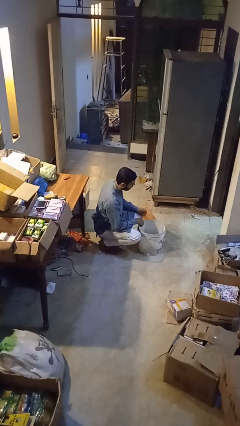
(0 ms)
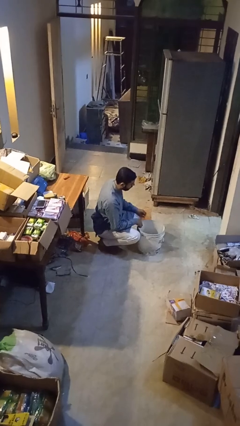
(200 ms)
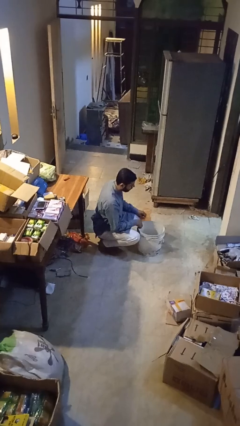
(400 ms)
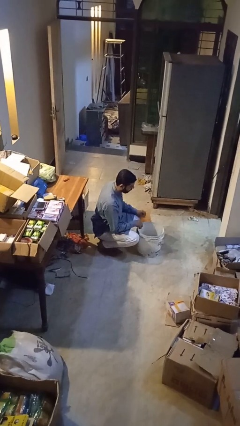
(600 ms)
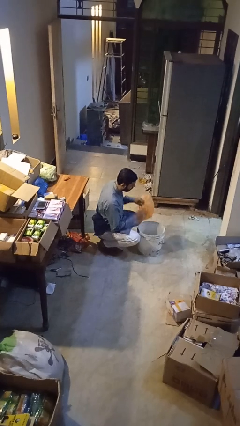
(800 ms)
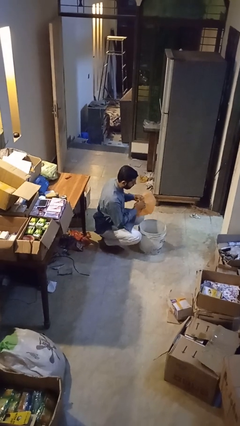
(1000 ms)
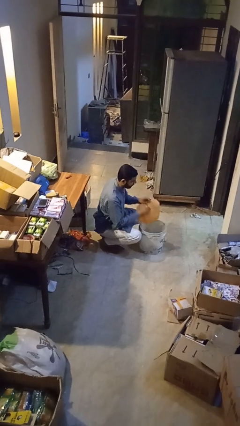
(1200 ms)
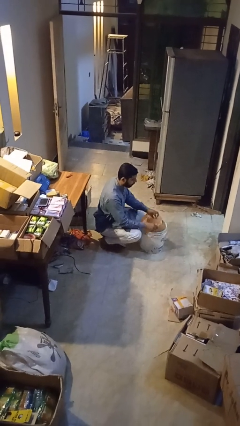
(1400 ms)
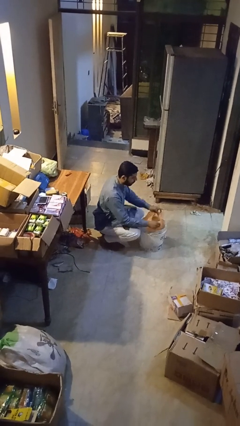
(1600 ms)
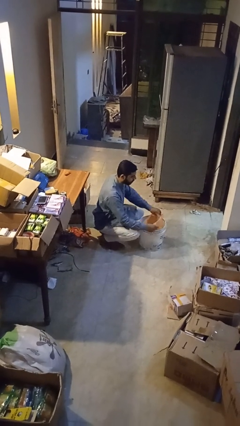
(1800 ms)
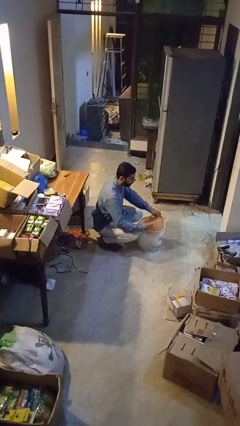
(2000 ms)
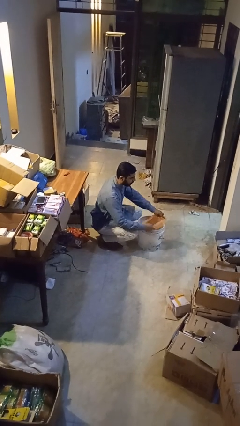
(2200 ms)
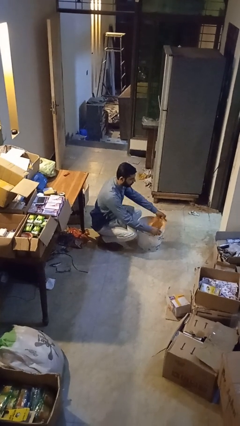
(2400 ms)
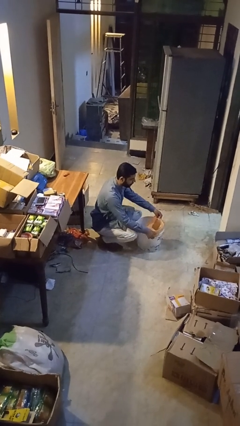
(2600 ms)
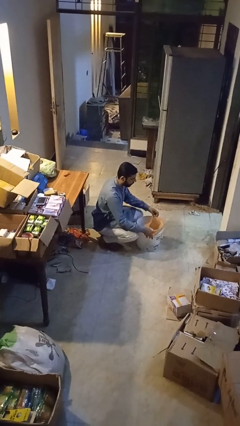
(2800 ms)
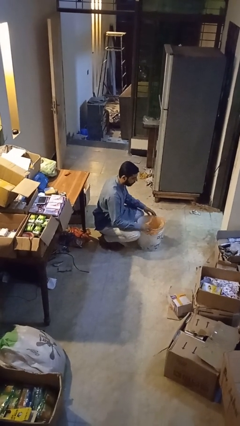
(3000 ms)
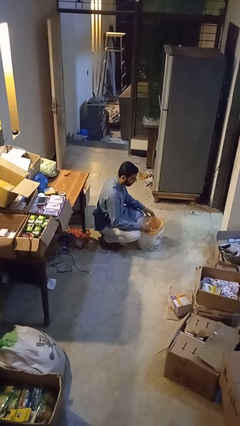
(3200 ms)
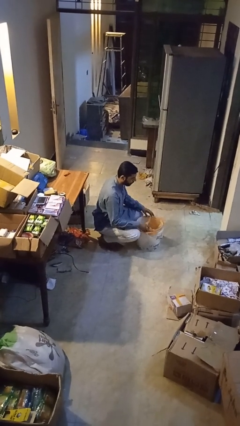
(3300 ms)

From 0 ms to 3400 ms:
person inserts trashbag into trashcan

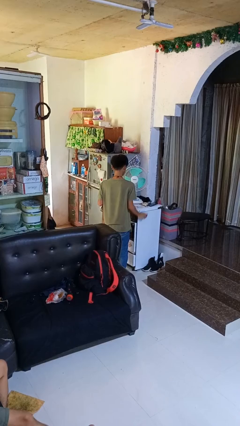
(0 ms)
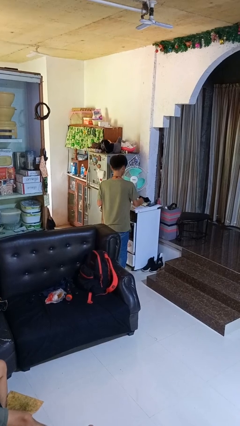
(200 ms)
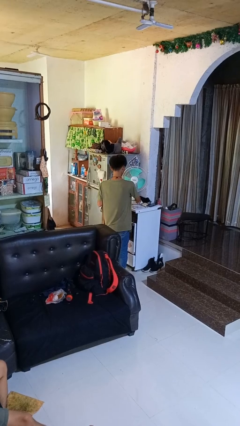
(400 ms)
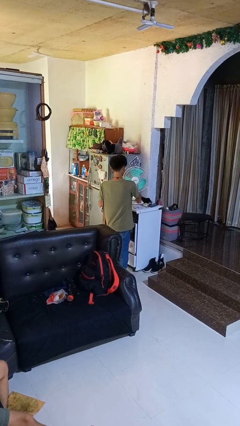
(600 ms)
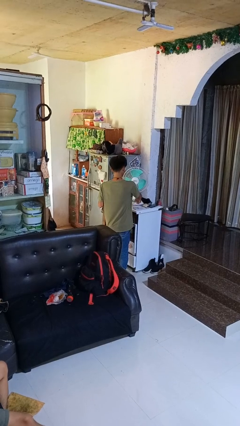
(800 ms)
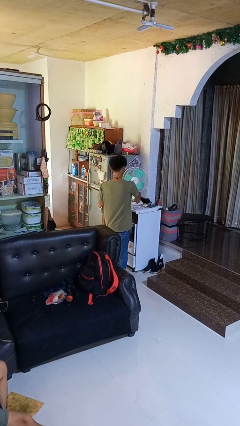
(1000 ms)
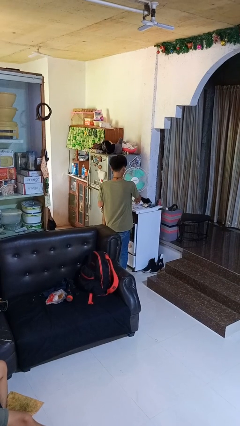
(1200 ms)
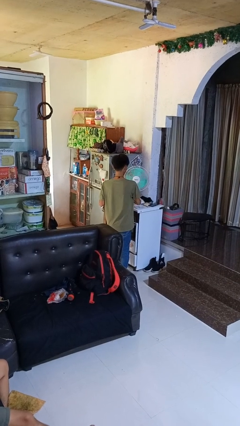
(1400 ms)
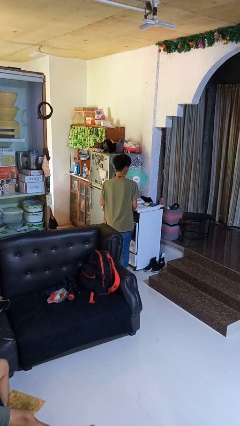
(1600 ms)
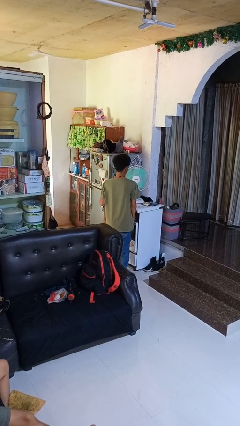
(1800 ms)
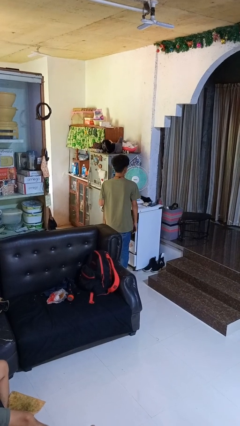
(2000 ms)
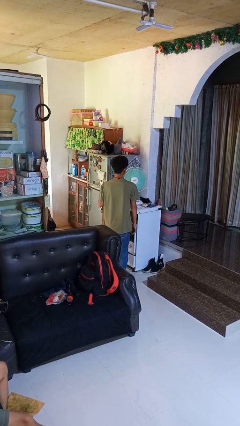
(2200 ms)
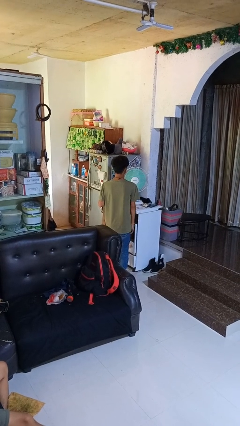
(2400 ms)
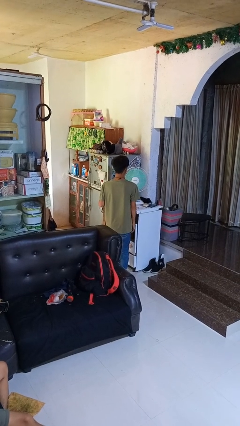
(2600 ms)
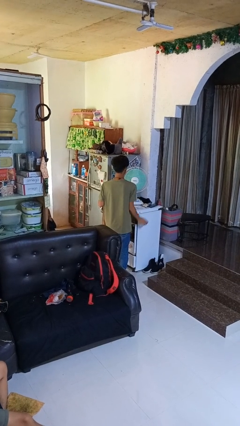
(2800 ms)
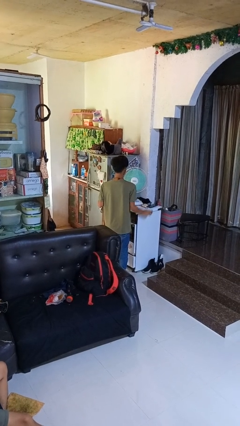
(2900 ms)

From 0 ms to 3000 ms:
person turns on fan

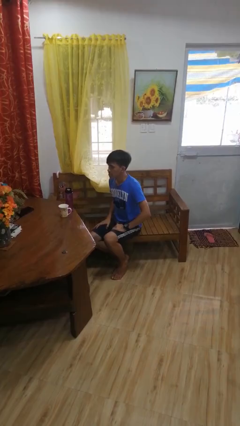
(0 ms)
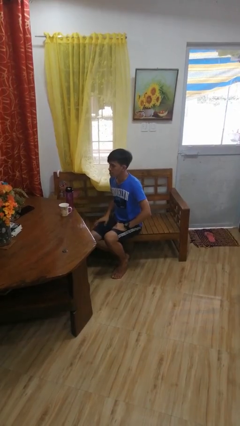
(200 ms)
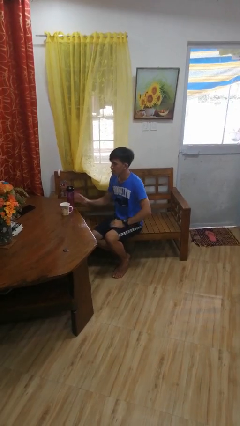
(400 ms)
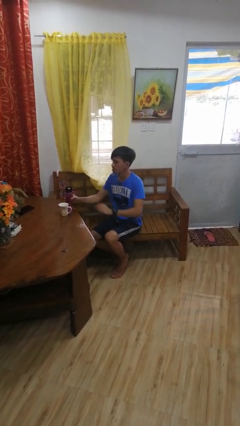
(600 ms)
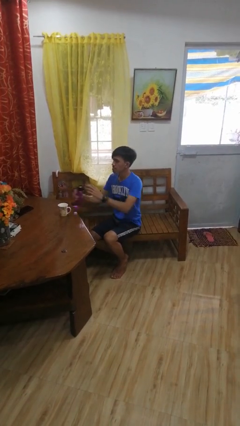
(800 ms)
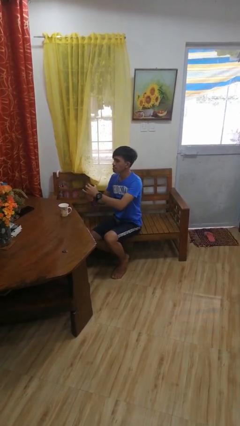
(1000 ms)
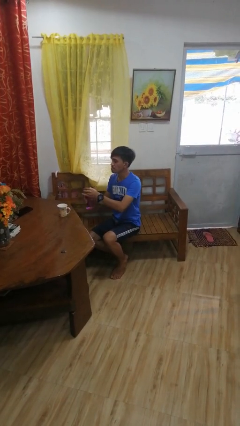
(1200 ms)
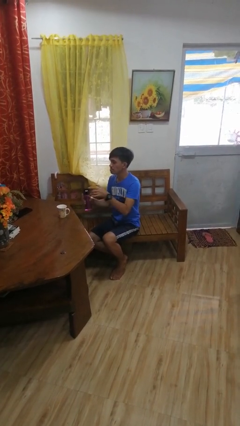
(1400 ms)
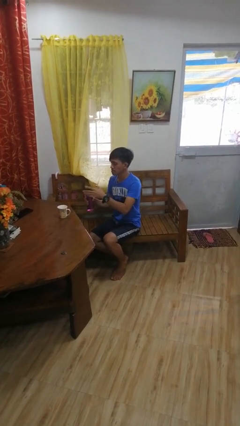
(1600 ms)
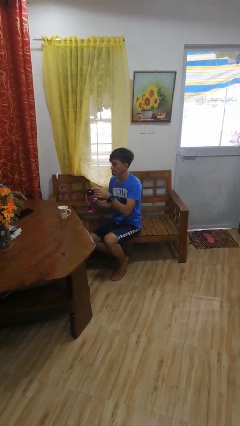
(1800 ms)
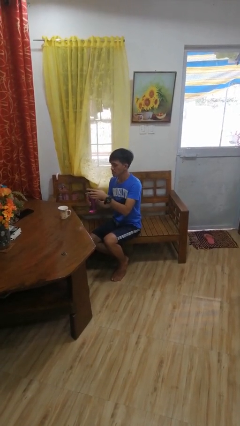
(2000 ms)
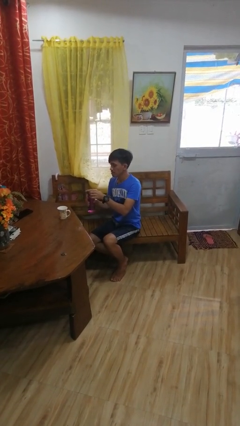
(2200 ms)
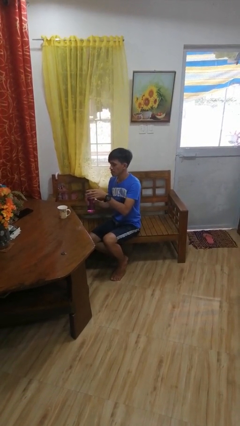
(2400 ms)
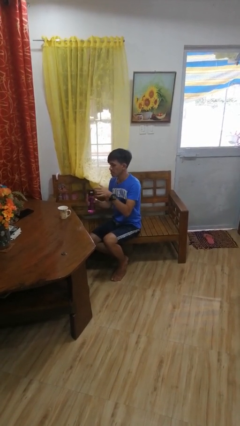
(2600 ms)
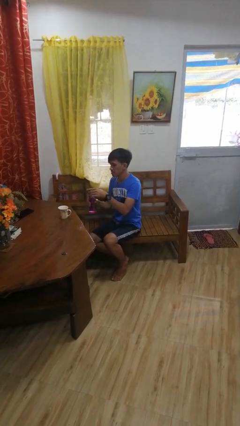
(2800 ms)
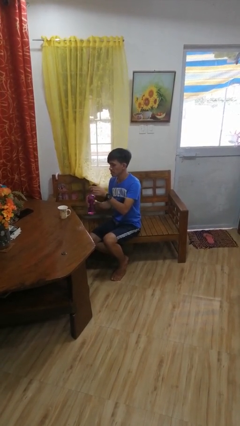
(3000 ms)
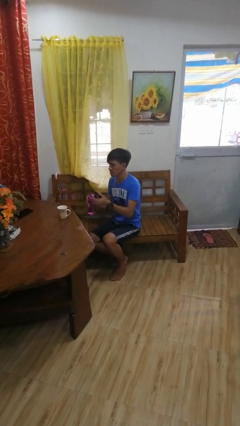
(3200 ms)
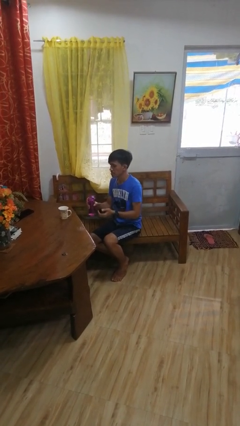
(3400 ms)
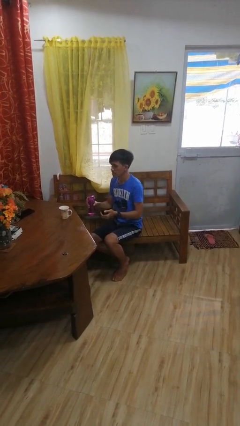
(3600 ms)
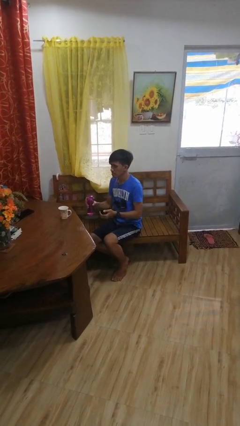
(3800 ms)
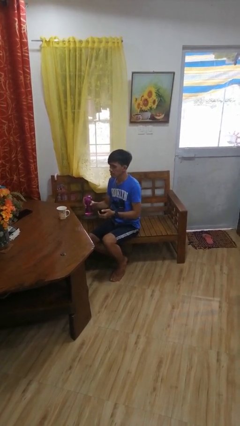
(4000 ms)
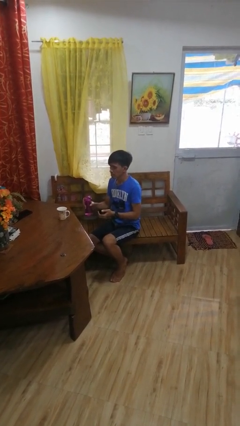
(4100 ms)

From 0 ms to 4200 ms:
person unscrews lid from bottle

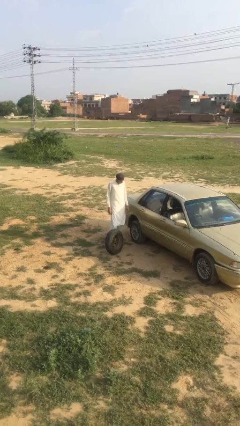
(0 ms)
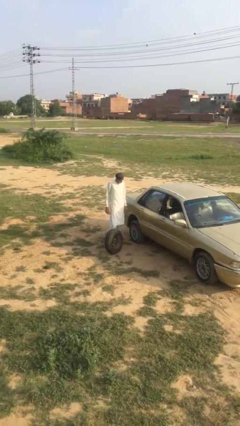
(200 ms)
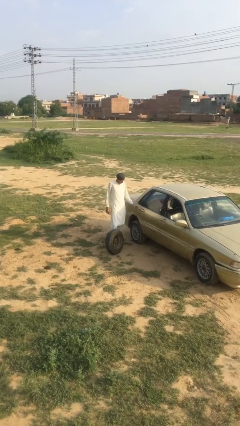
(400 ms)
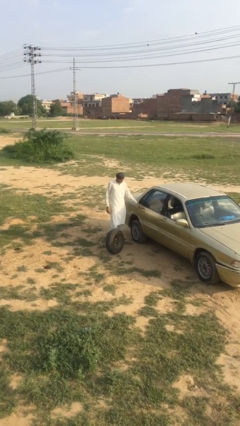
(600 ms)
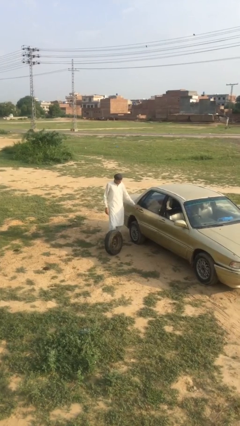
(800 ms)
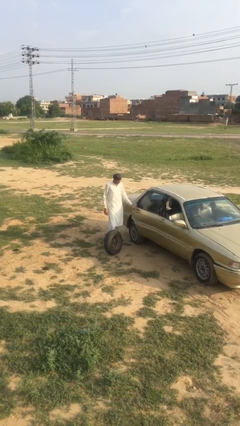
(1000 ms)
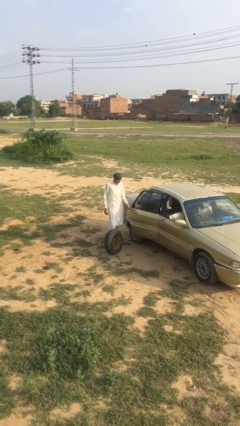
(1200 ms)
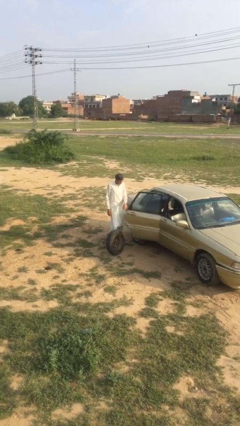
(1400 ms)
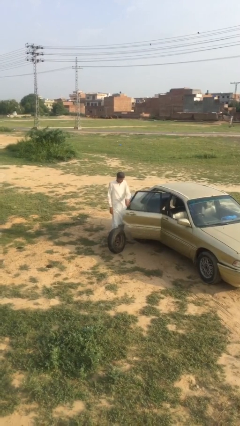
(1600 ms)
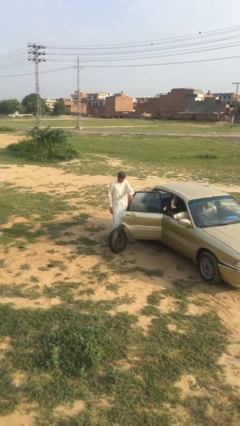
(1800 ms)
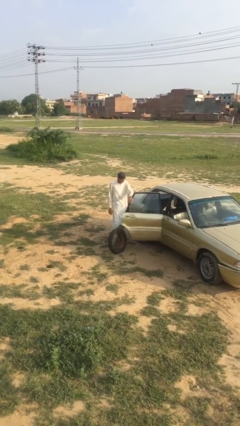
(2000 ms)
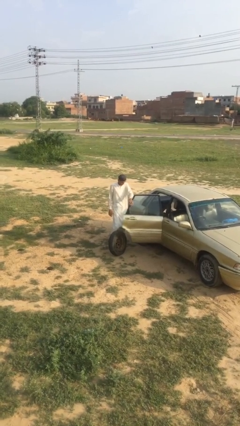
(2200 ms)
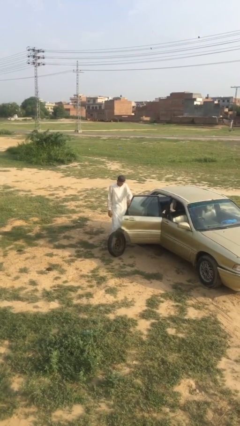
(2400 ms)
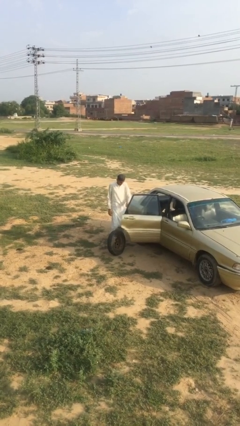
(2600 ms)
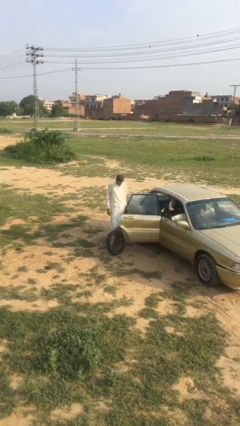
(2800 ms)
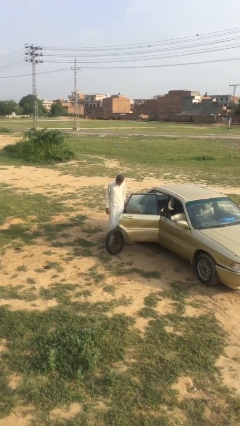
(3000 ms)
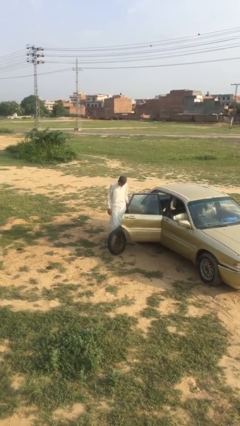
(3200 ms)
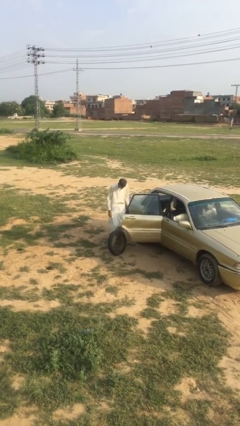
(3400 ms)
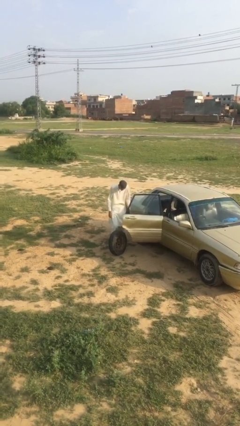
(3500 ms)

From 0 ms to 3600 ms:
person opens car door

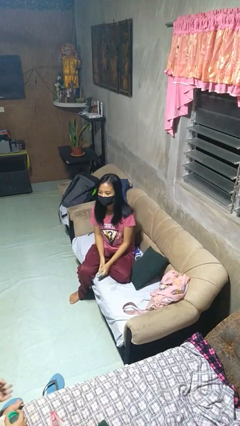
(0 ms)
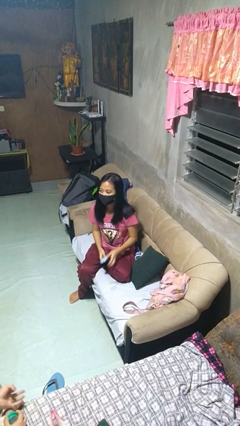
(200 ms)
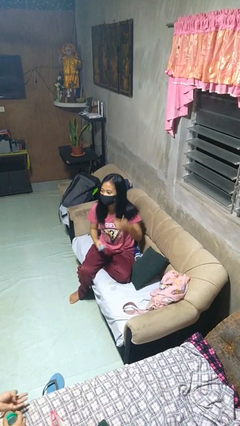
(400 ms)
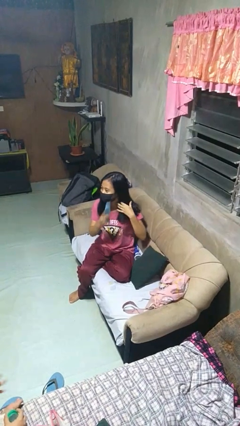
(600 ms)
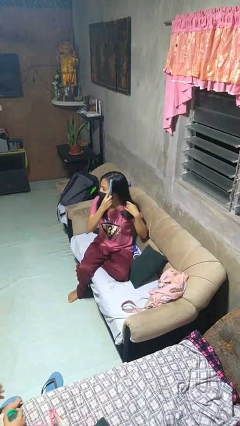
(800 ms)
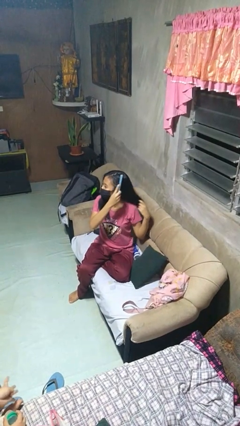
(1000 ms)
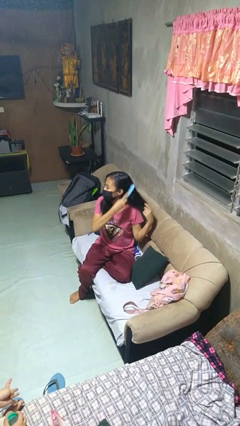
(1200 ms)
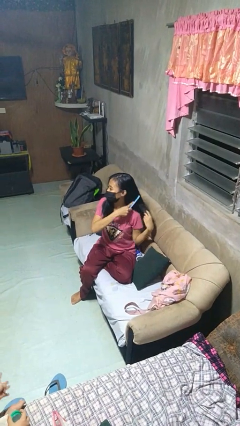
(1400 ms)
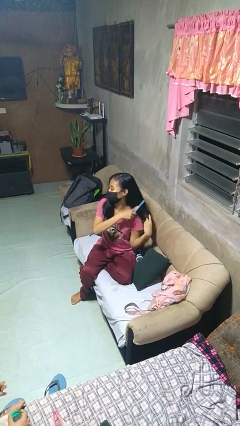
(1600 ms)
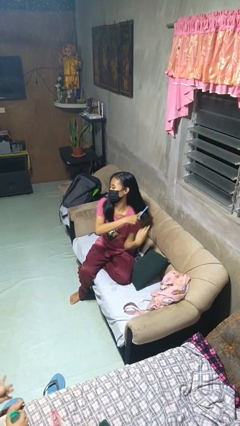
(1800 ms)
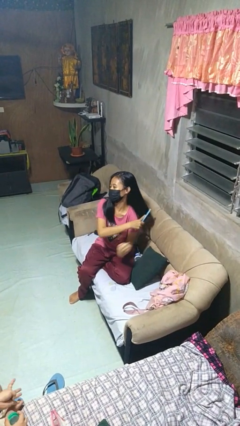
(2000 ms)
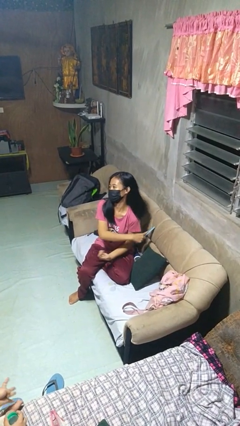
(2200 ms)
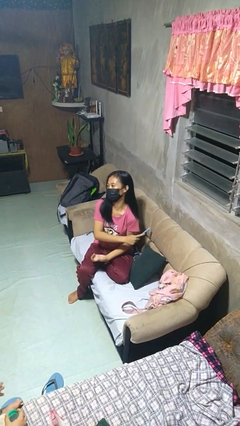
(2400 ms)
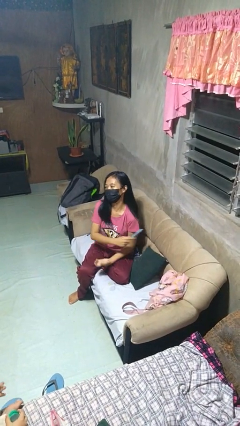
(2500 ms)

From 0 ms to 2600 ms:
person brushes hair

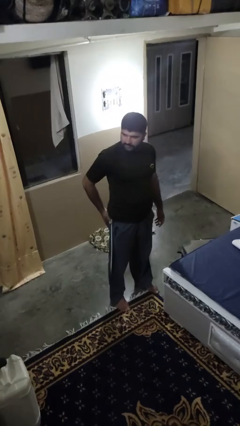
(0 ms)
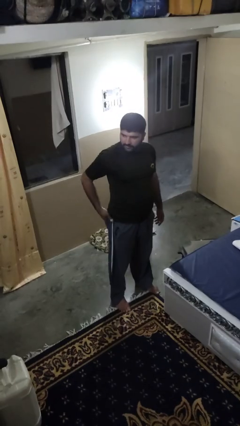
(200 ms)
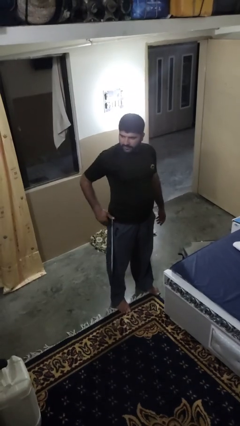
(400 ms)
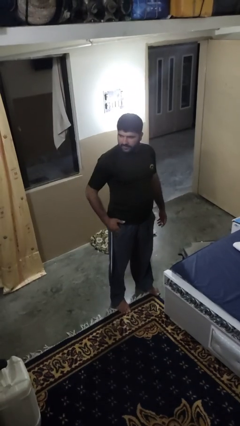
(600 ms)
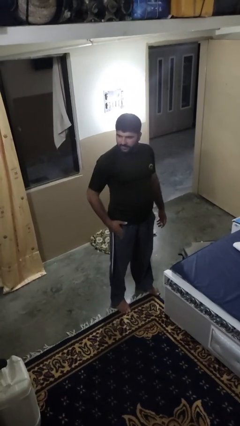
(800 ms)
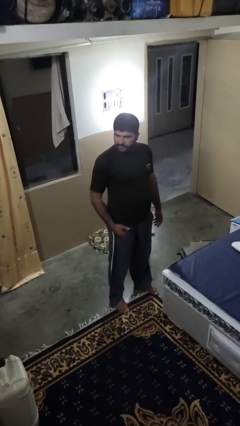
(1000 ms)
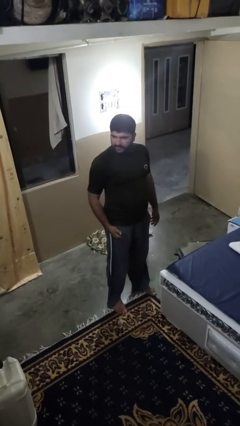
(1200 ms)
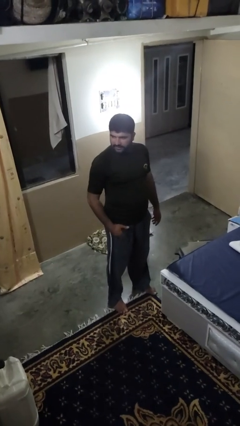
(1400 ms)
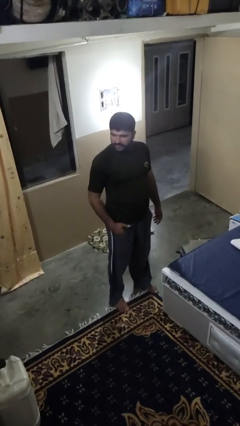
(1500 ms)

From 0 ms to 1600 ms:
person puts hands in back pockets
